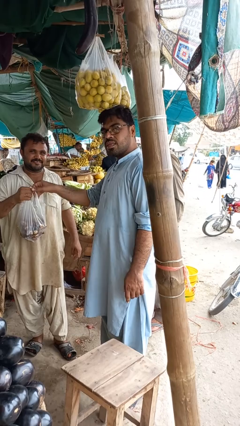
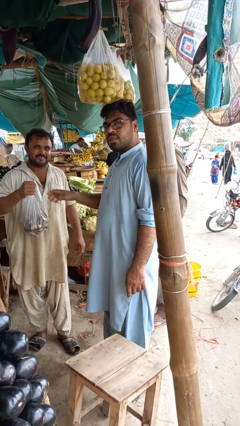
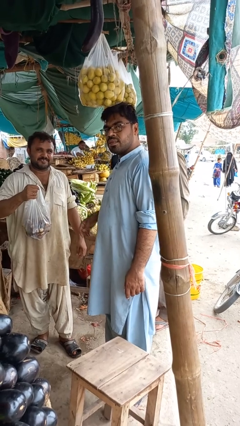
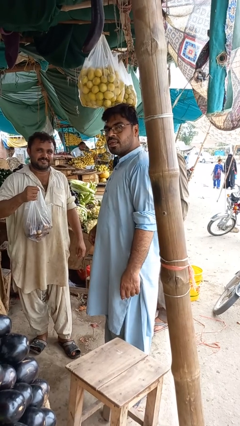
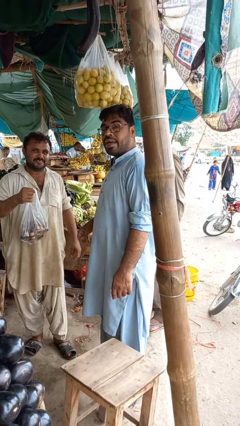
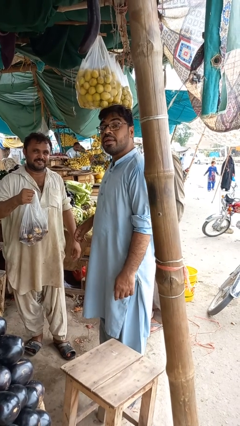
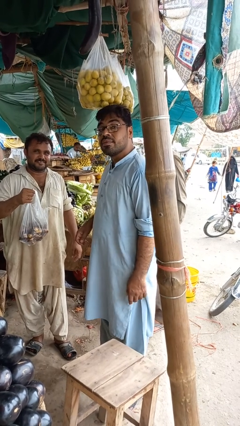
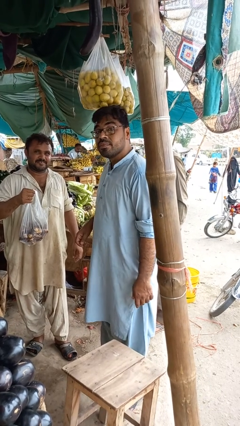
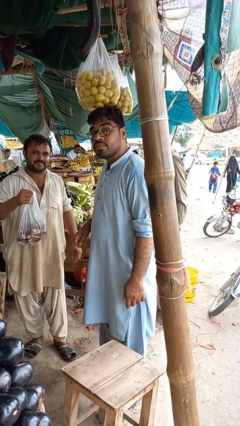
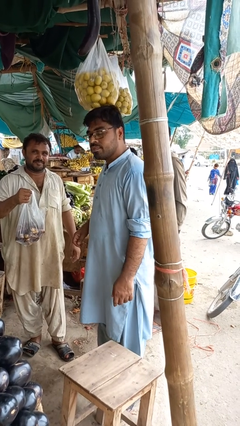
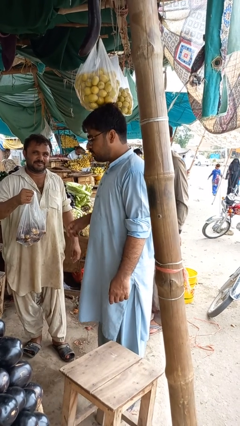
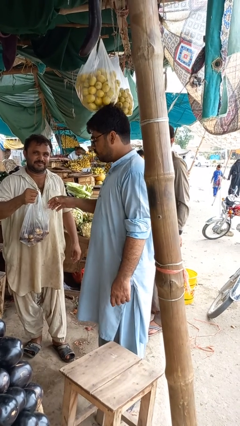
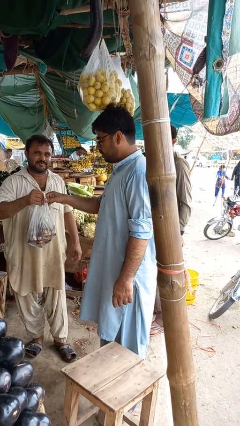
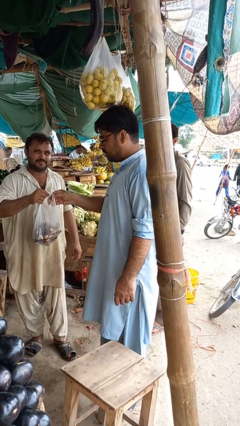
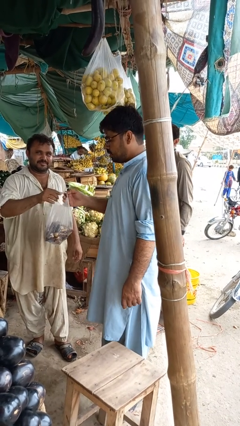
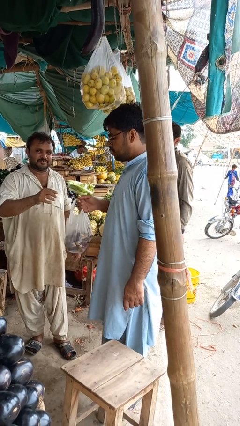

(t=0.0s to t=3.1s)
person transfers object to person

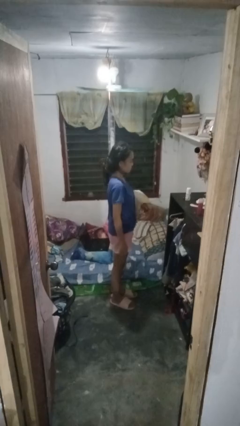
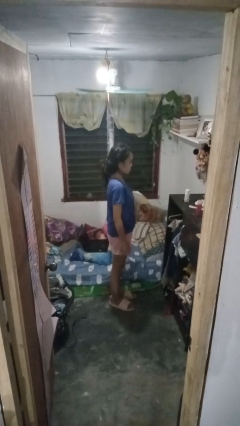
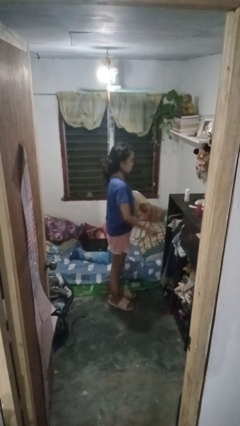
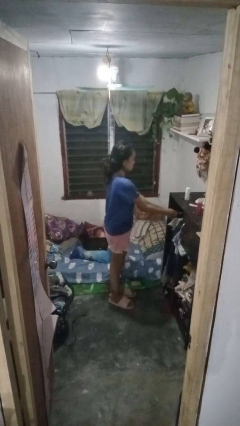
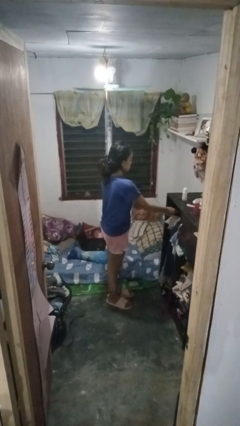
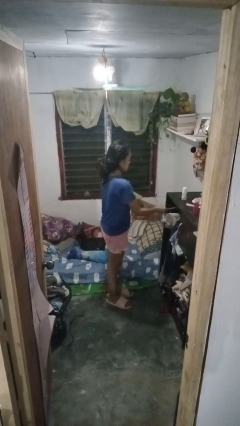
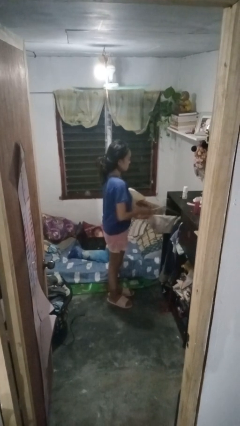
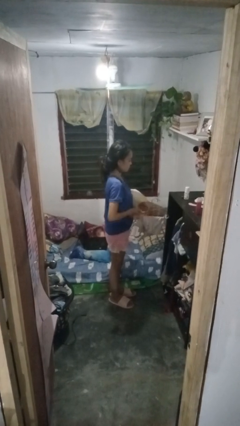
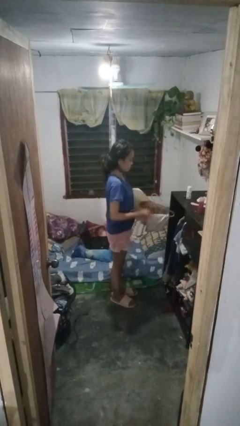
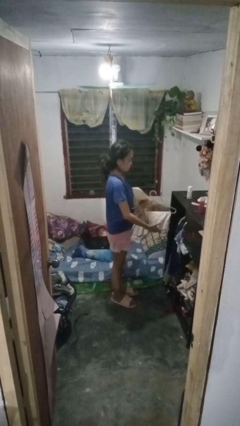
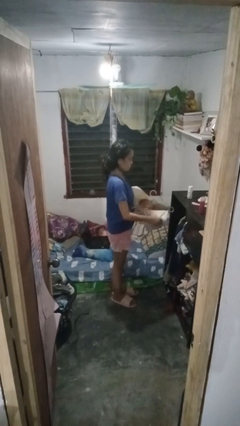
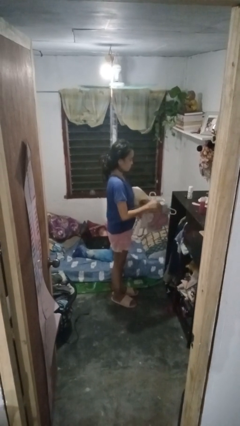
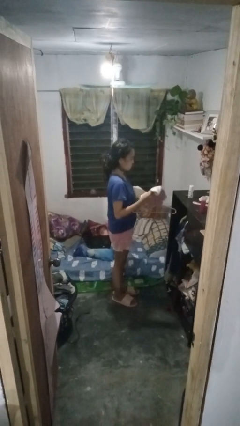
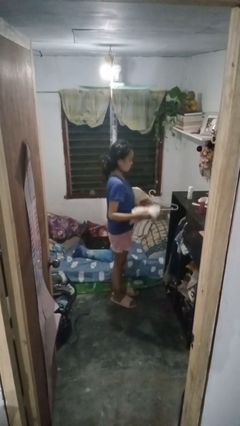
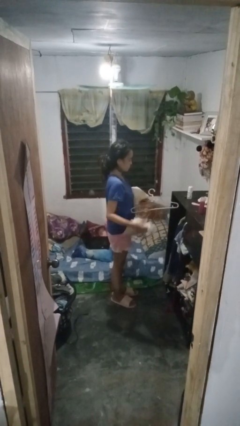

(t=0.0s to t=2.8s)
person takes clothes from closet

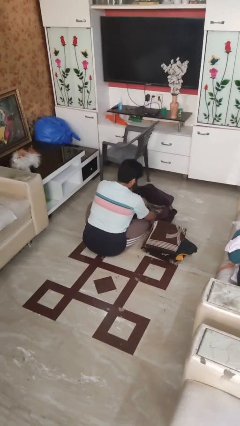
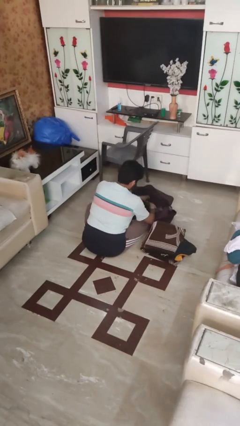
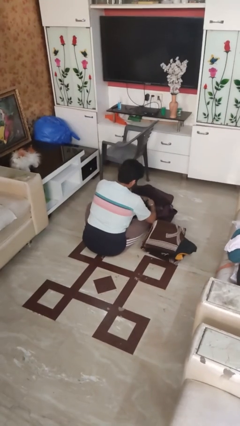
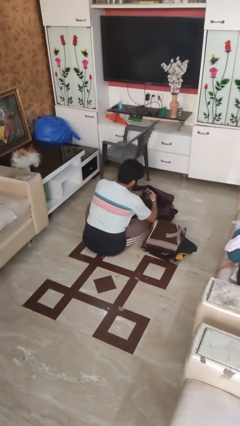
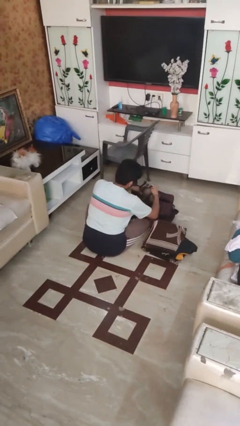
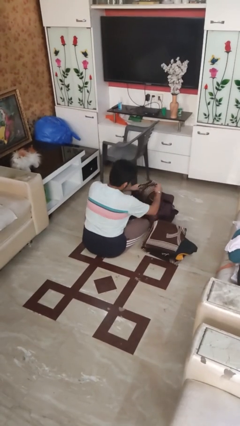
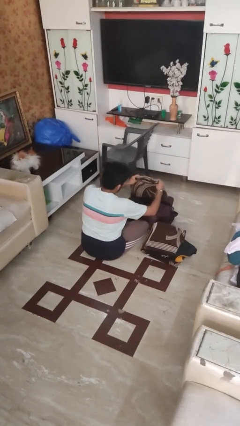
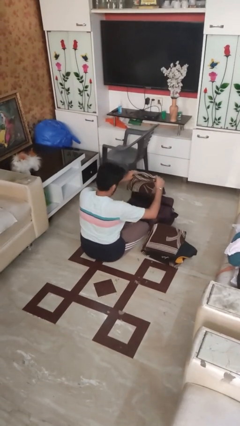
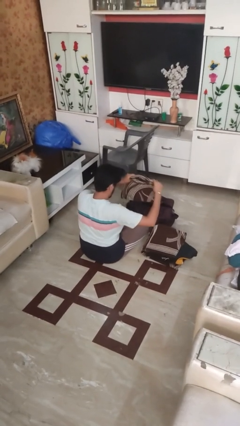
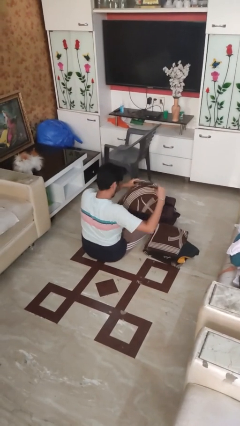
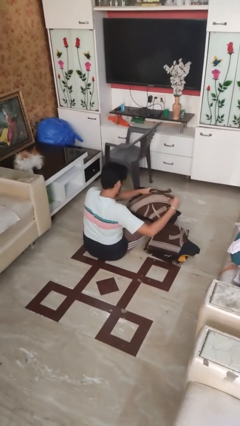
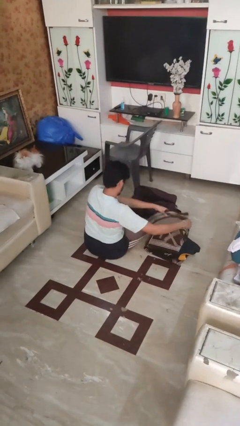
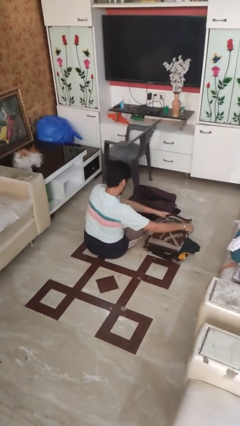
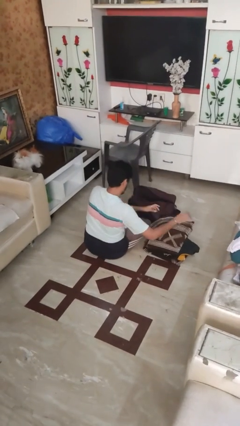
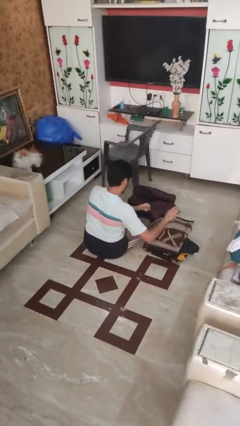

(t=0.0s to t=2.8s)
person unloads clothes from suitcase

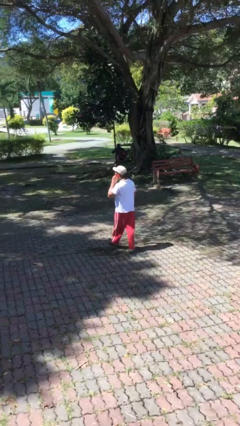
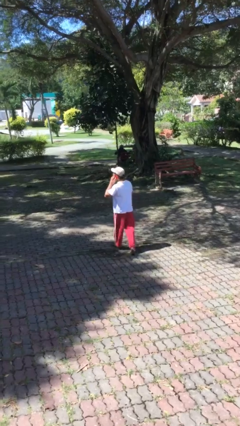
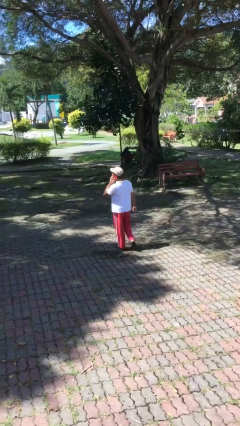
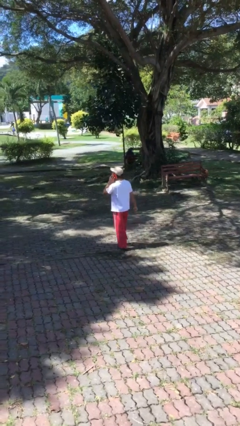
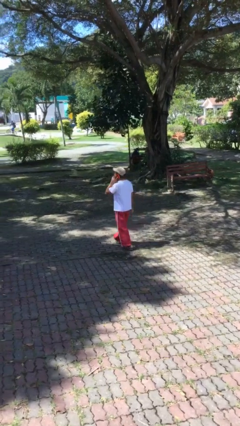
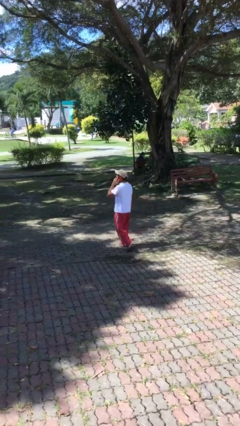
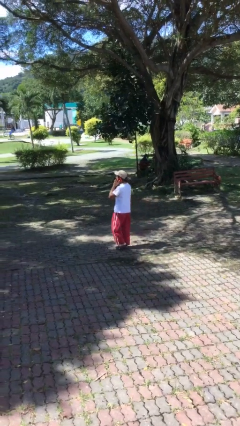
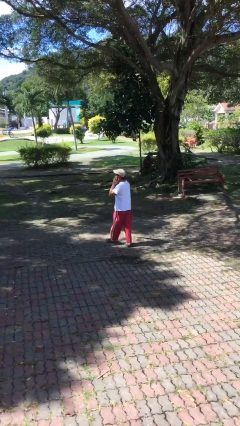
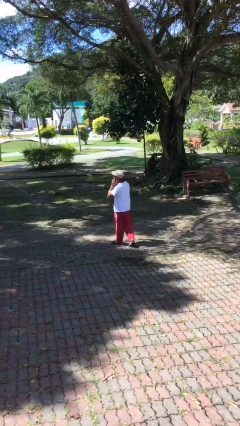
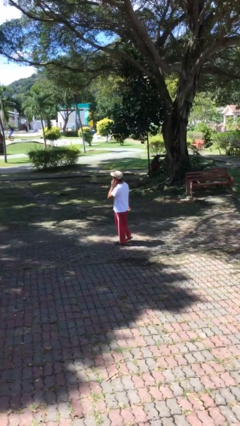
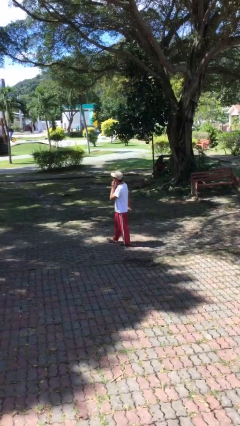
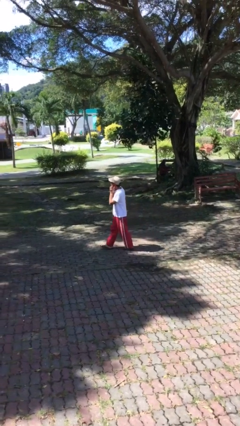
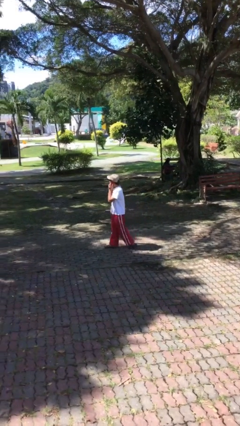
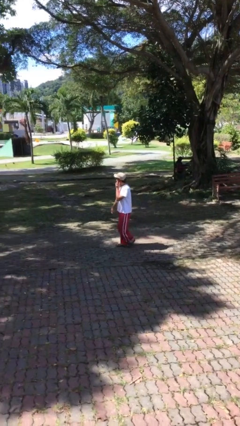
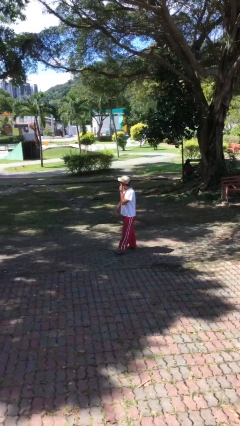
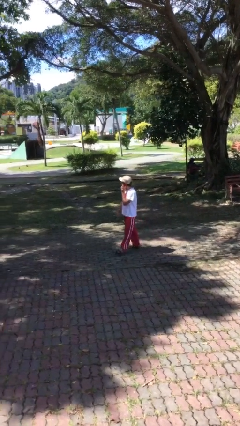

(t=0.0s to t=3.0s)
person talks on phone

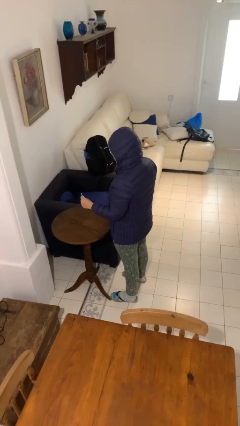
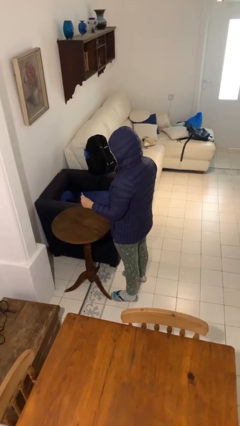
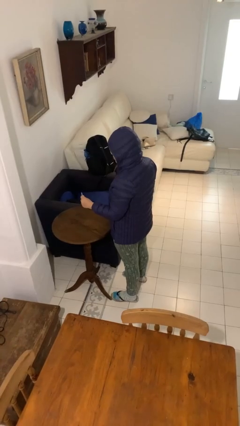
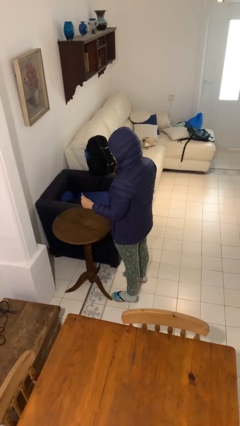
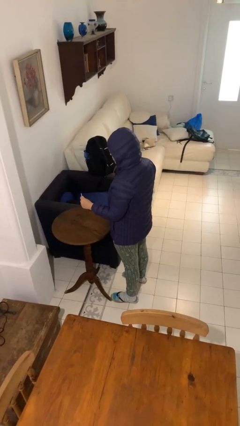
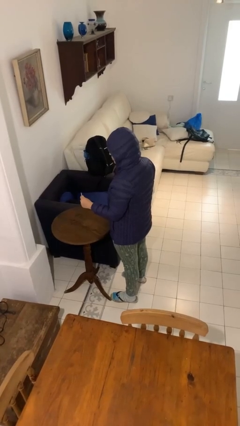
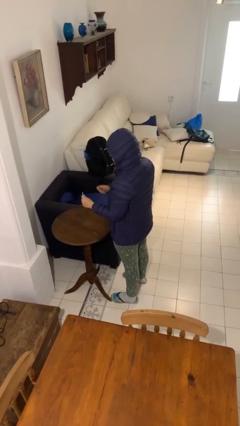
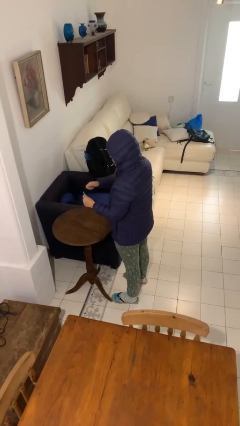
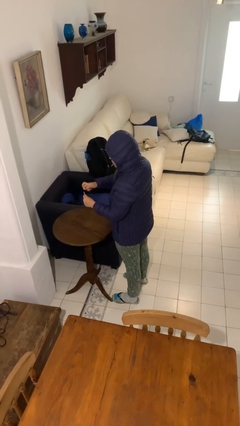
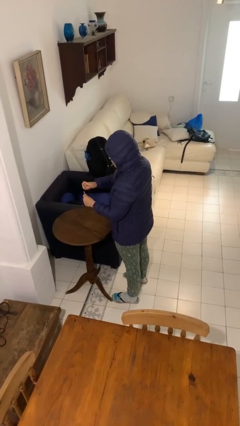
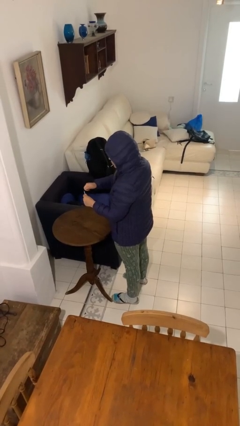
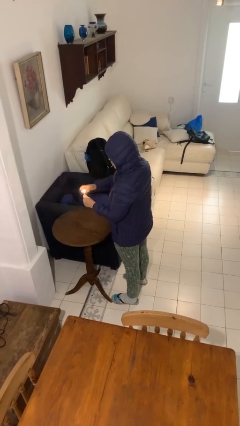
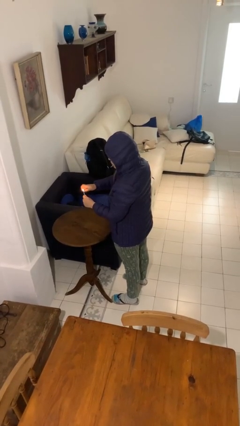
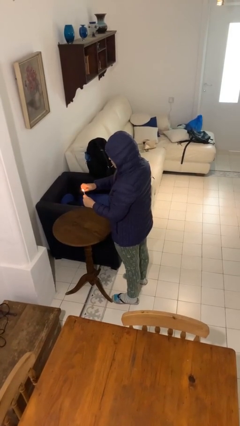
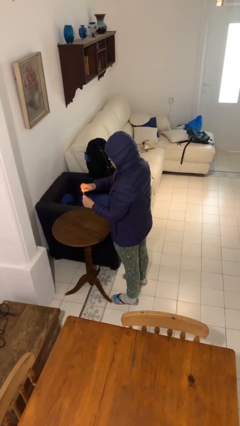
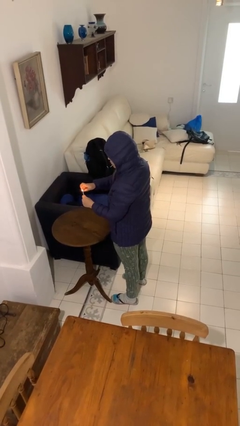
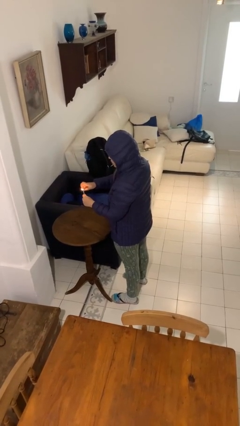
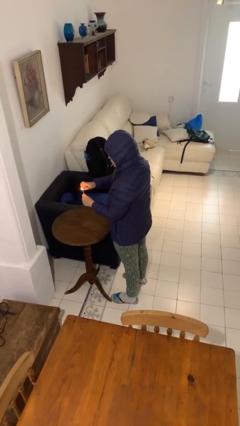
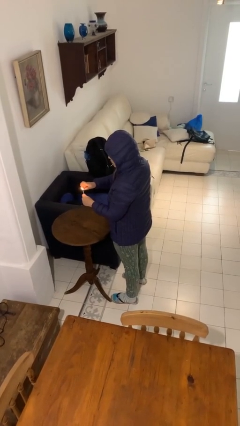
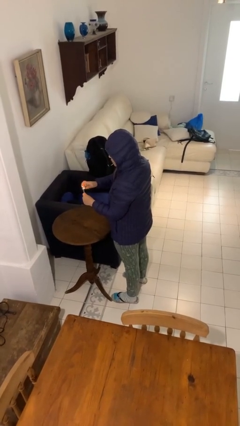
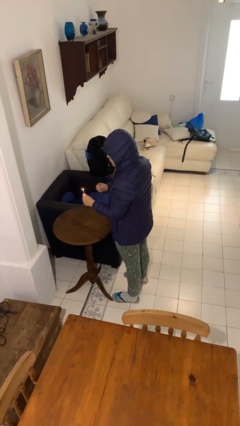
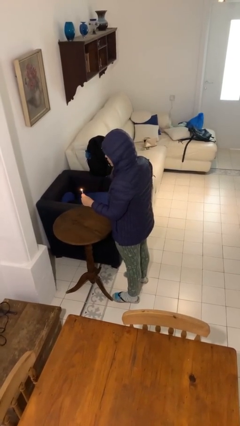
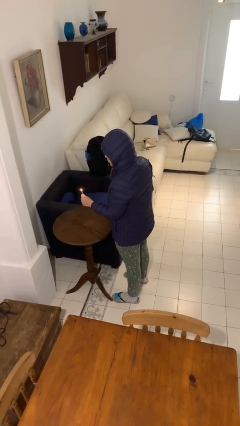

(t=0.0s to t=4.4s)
person lights candle

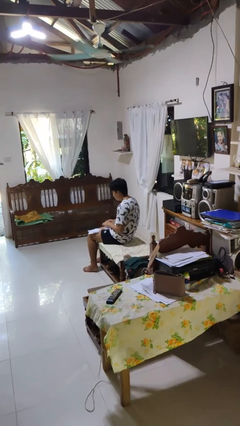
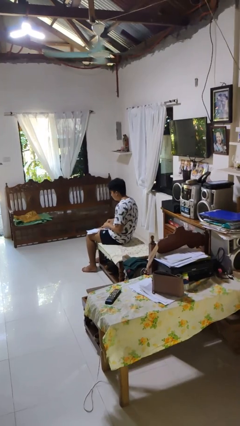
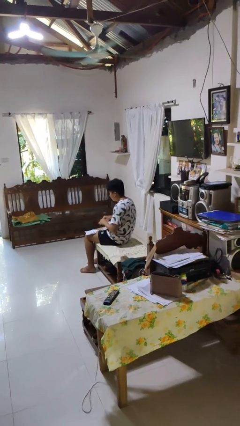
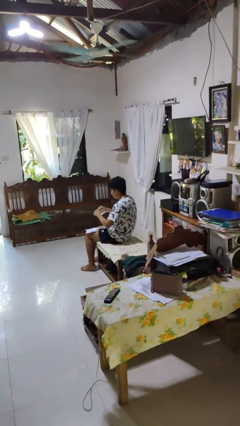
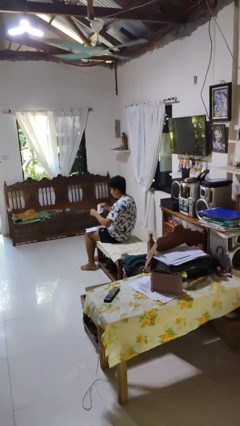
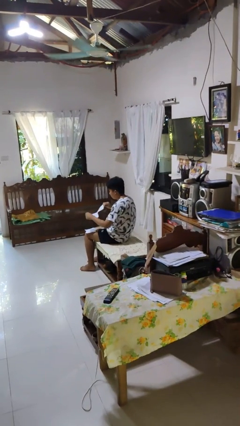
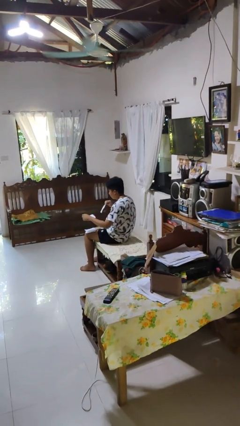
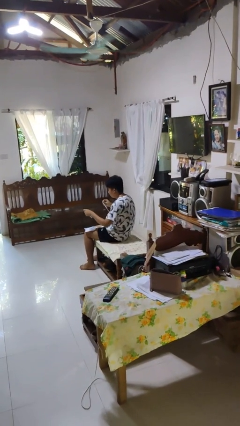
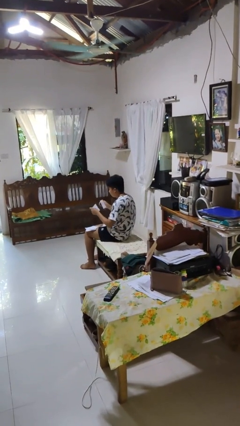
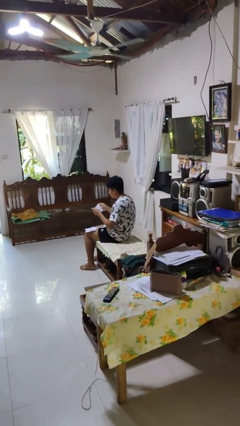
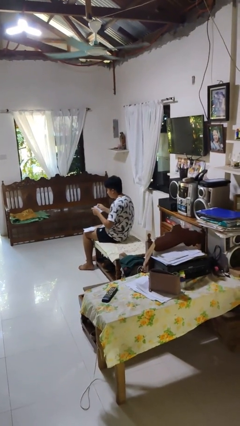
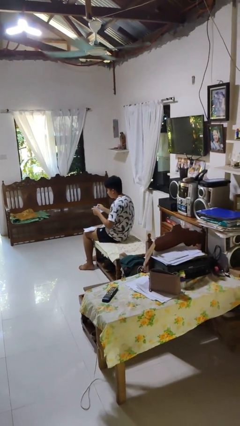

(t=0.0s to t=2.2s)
person tears paper
